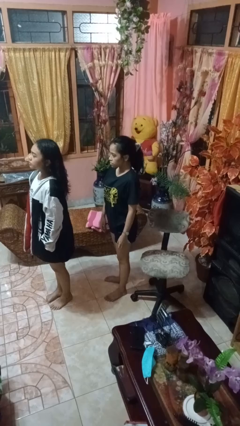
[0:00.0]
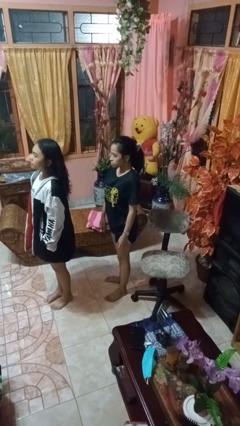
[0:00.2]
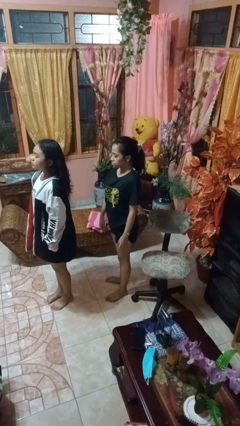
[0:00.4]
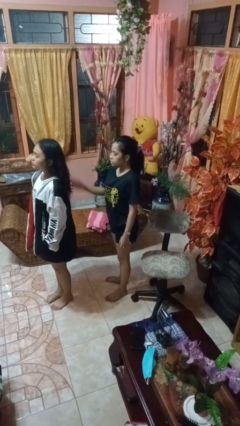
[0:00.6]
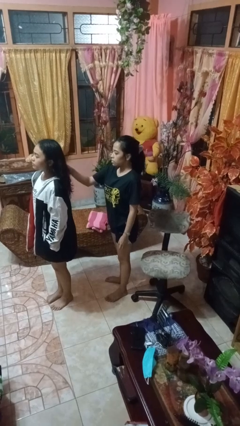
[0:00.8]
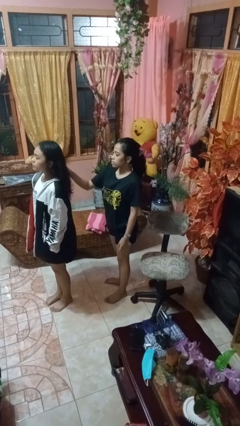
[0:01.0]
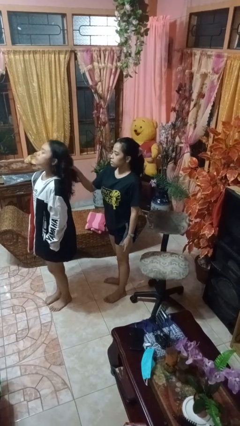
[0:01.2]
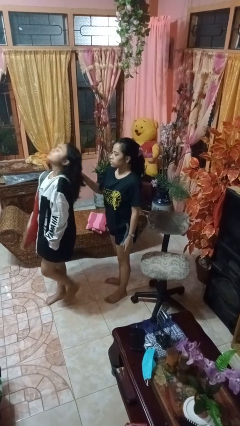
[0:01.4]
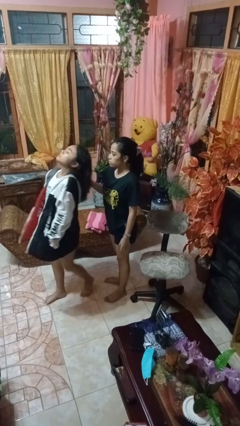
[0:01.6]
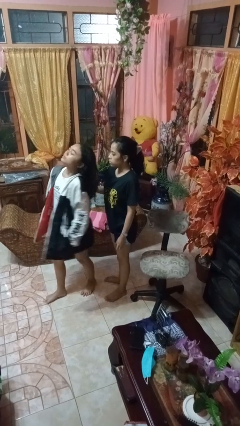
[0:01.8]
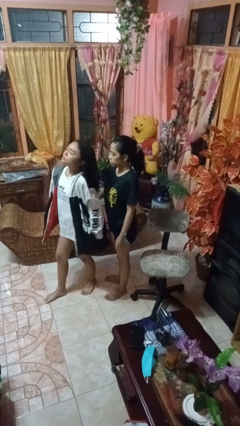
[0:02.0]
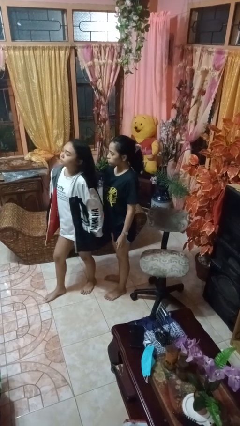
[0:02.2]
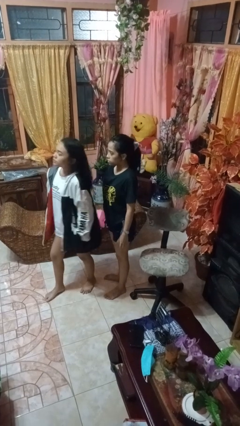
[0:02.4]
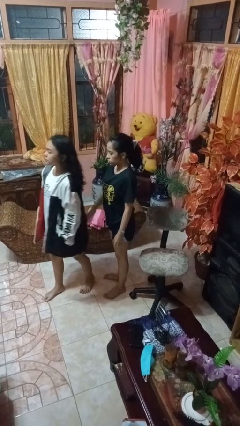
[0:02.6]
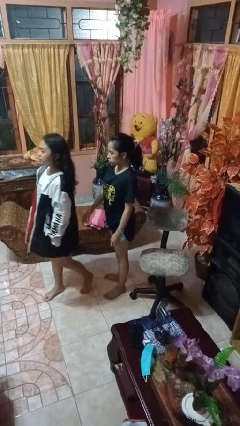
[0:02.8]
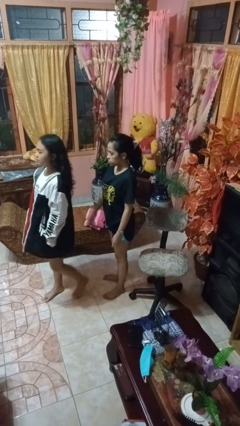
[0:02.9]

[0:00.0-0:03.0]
person grabs person by hair

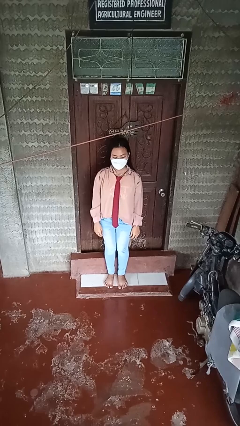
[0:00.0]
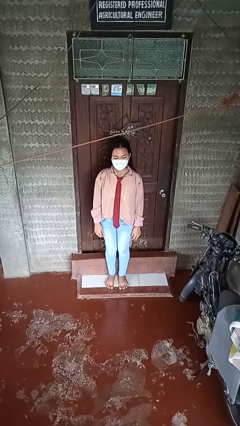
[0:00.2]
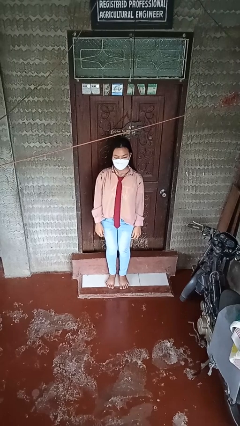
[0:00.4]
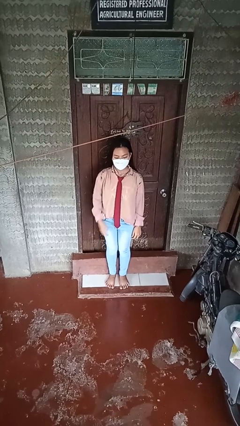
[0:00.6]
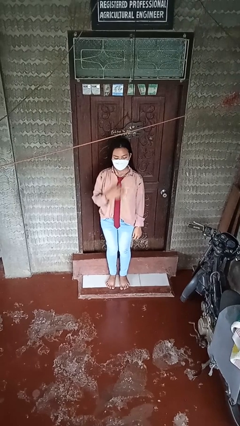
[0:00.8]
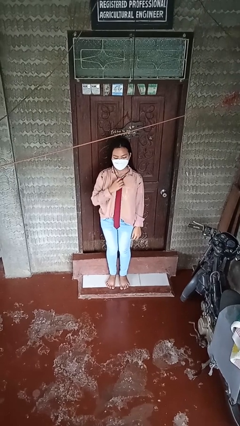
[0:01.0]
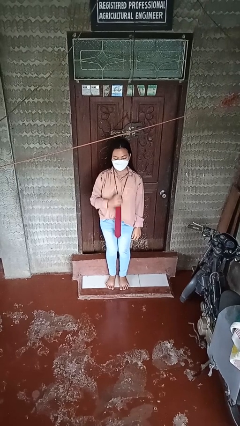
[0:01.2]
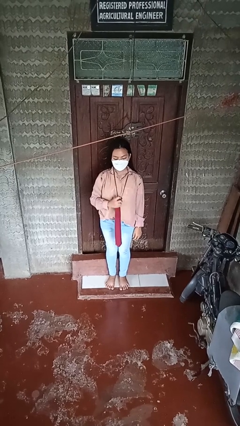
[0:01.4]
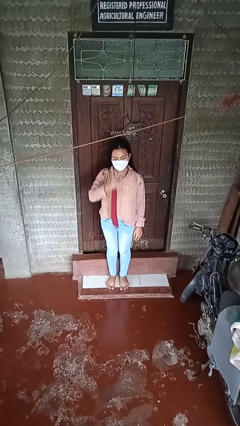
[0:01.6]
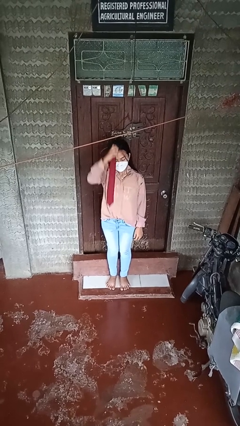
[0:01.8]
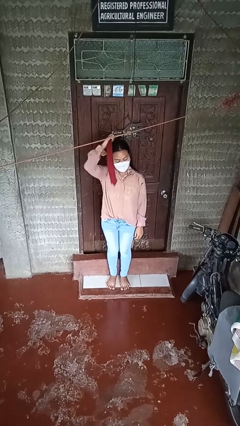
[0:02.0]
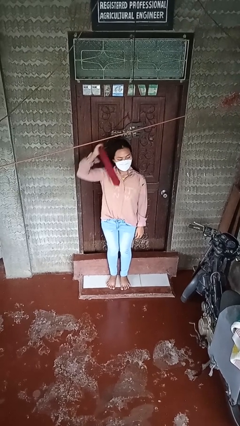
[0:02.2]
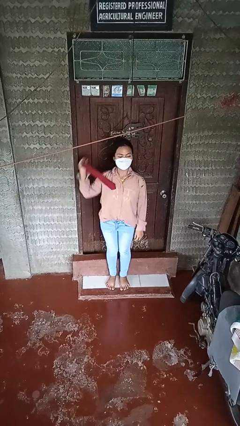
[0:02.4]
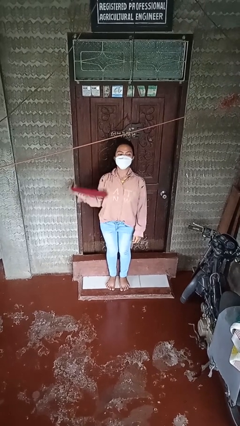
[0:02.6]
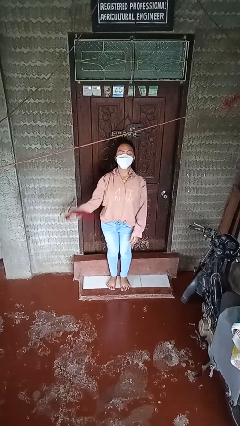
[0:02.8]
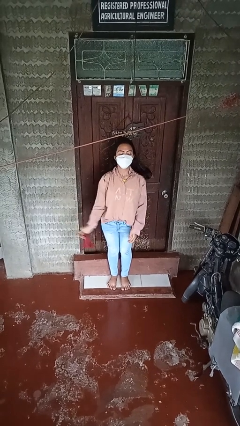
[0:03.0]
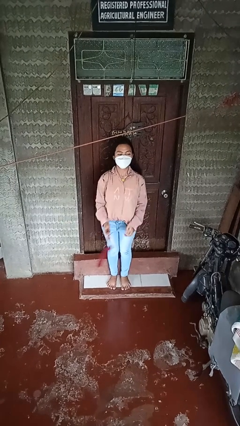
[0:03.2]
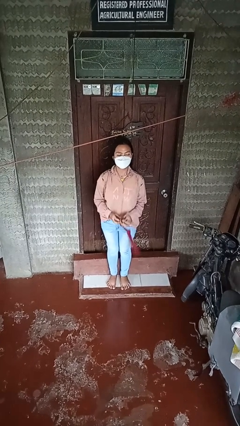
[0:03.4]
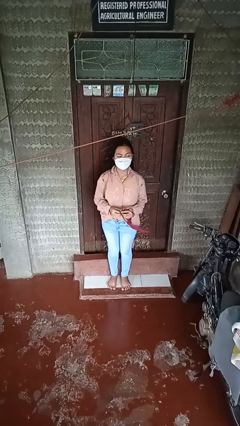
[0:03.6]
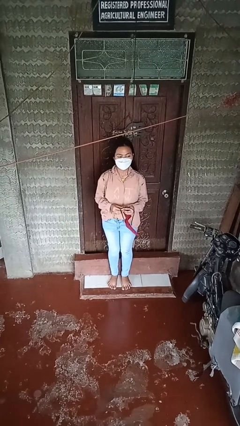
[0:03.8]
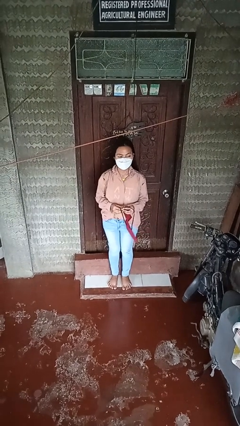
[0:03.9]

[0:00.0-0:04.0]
person takes off necktie

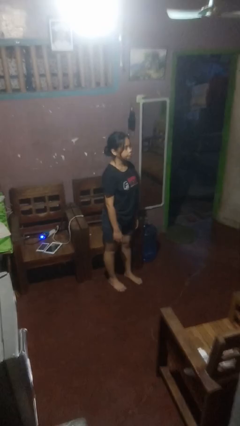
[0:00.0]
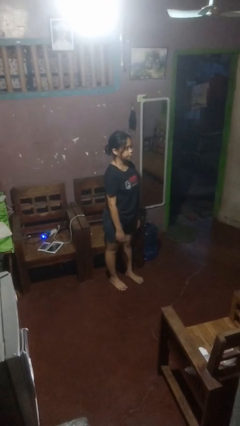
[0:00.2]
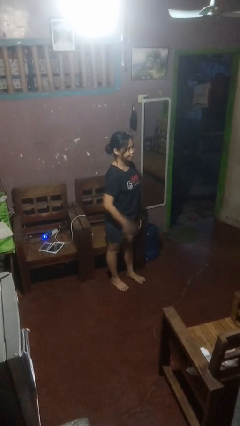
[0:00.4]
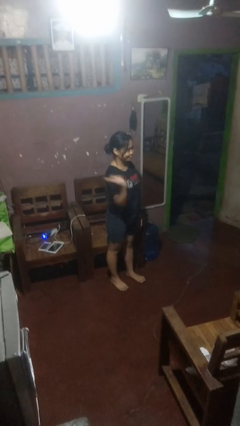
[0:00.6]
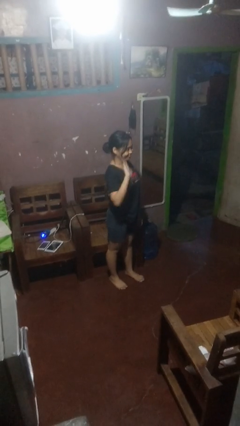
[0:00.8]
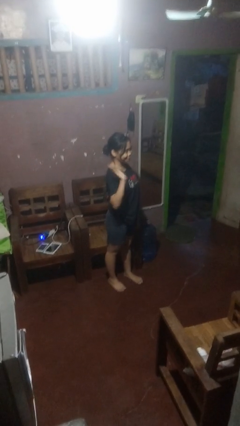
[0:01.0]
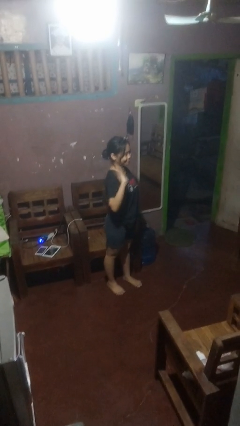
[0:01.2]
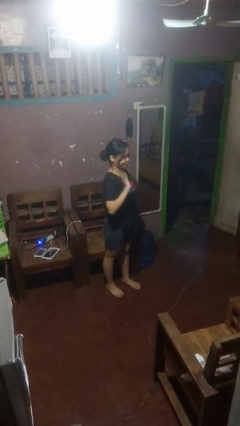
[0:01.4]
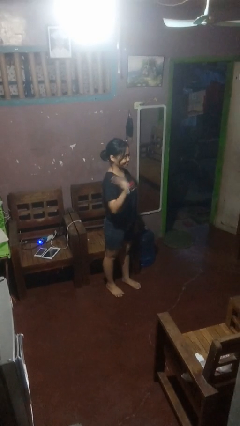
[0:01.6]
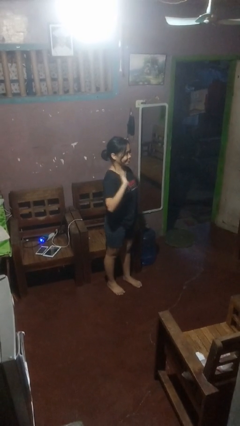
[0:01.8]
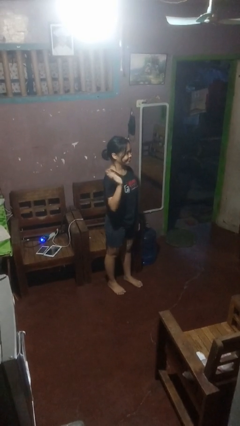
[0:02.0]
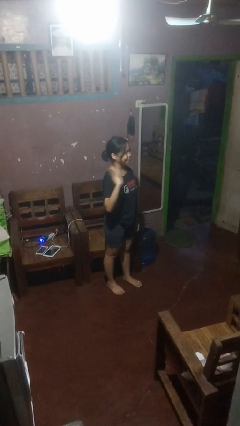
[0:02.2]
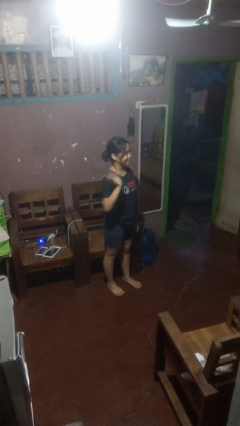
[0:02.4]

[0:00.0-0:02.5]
person waves at person

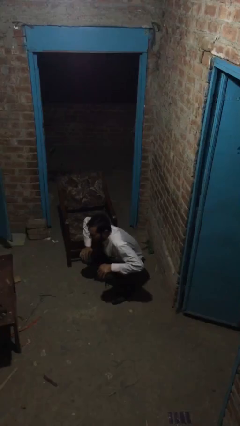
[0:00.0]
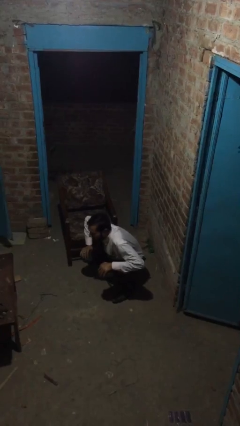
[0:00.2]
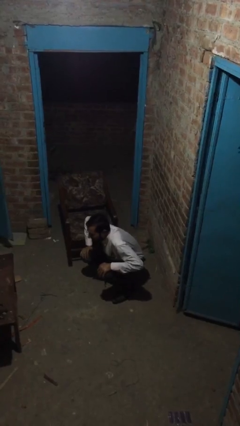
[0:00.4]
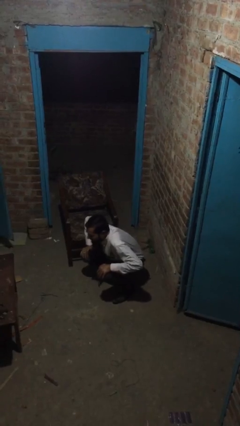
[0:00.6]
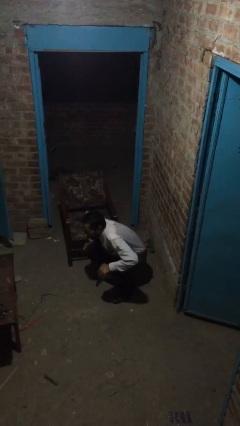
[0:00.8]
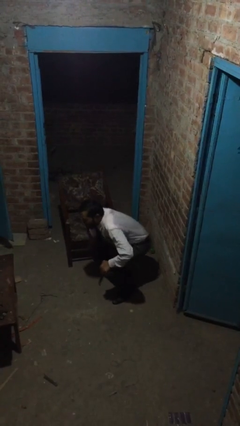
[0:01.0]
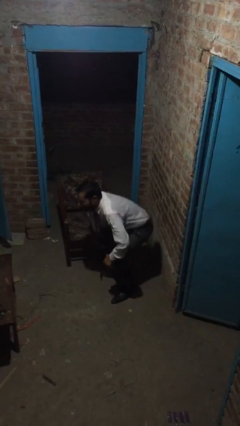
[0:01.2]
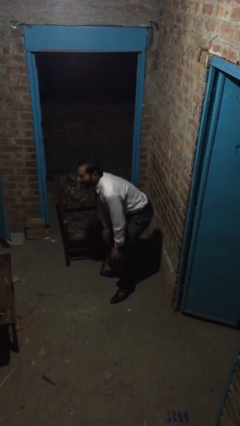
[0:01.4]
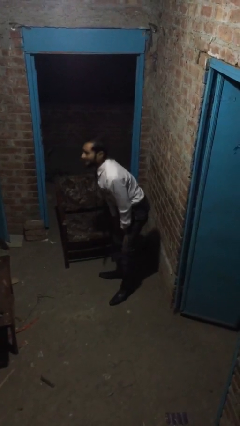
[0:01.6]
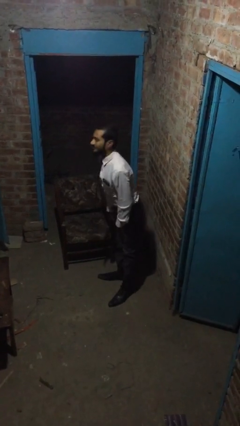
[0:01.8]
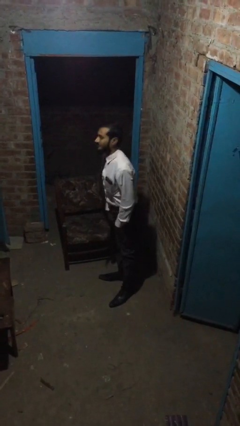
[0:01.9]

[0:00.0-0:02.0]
person stands up

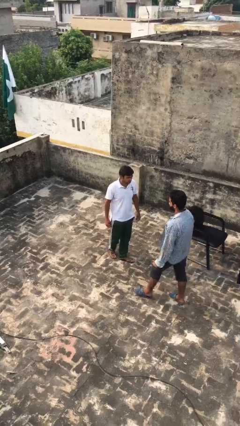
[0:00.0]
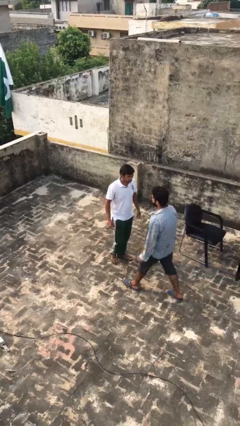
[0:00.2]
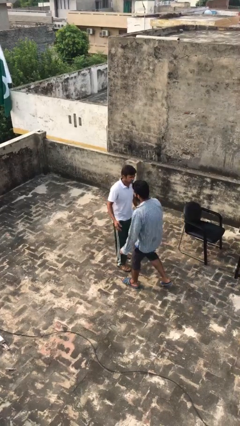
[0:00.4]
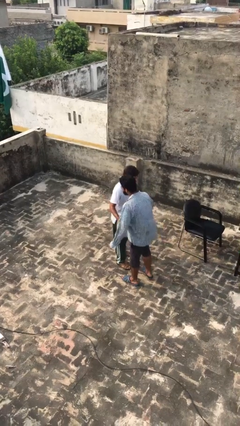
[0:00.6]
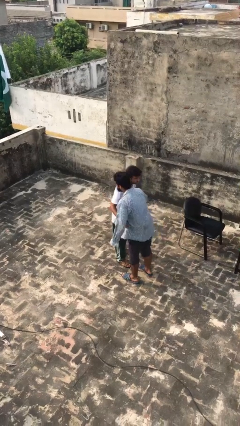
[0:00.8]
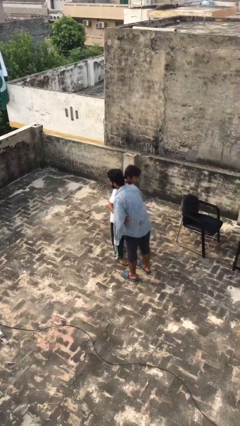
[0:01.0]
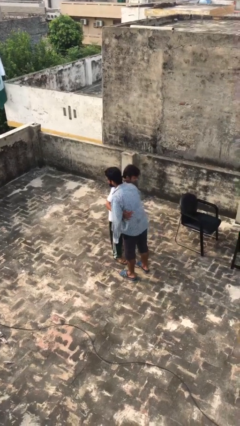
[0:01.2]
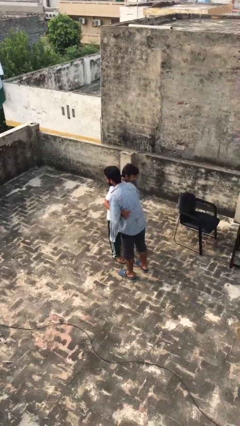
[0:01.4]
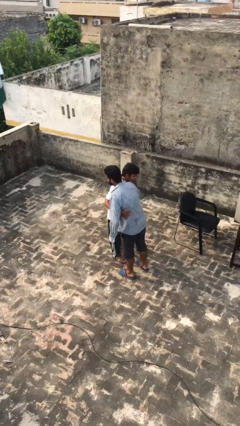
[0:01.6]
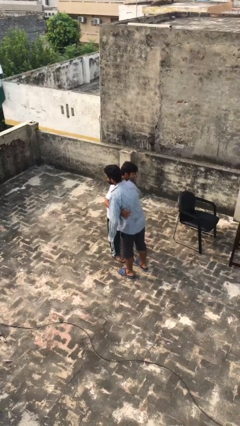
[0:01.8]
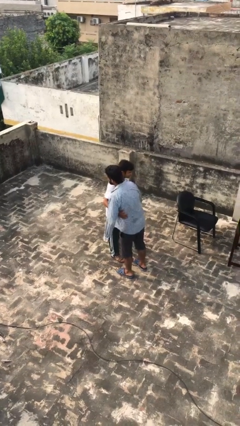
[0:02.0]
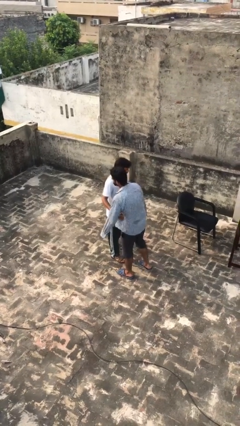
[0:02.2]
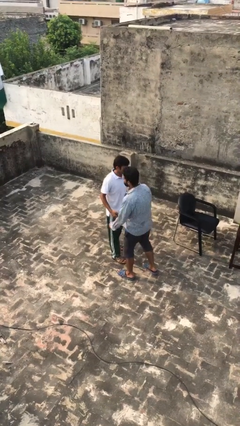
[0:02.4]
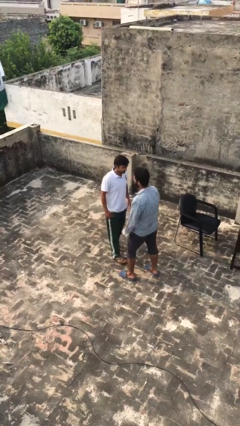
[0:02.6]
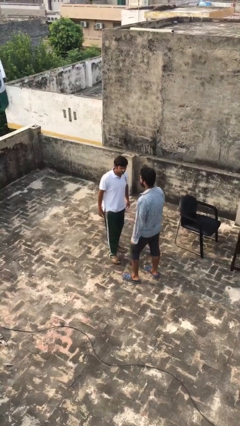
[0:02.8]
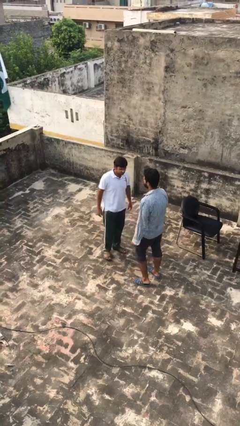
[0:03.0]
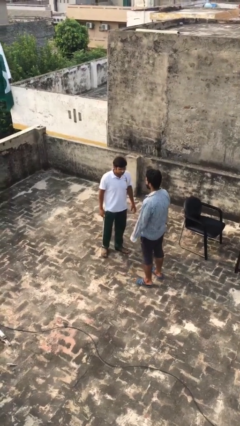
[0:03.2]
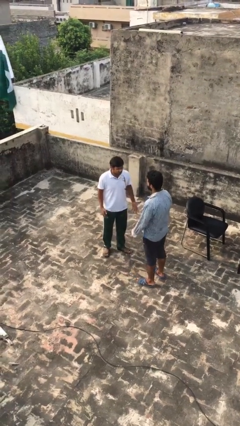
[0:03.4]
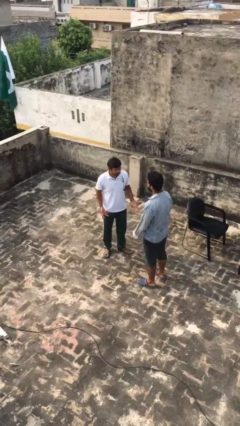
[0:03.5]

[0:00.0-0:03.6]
person embraces person

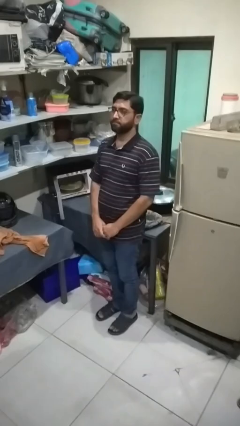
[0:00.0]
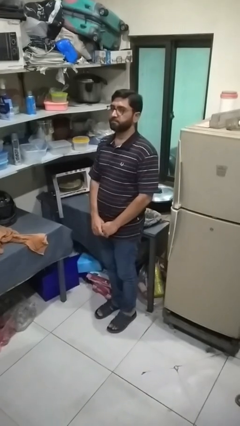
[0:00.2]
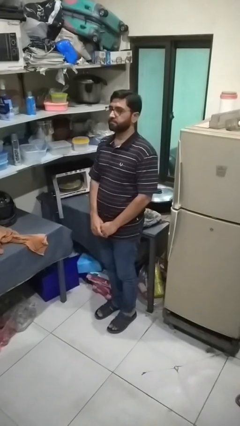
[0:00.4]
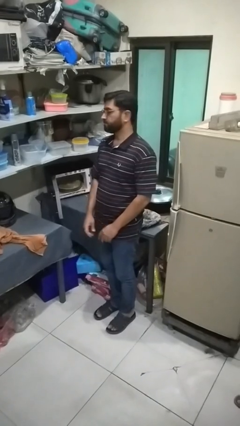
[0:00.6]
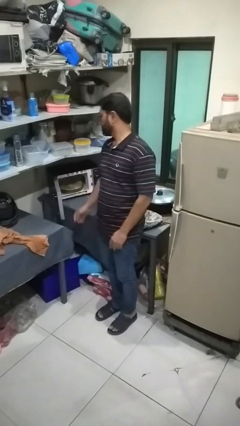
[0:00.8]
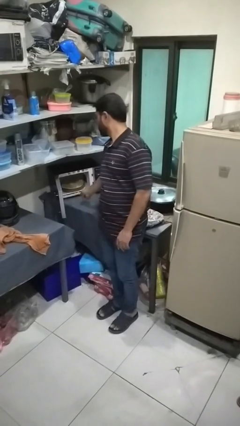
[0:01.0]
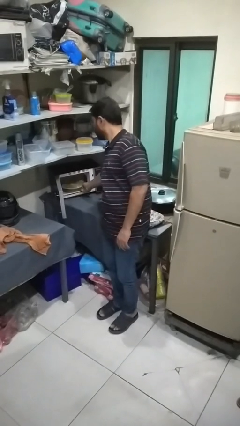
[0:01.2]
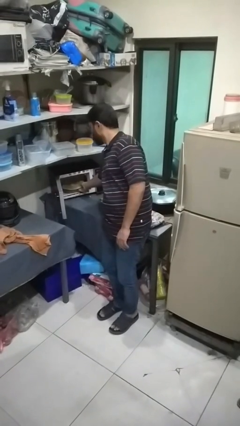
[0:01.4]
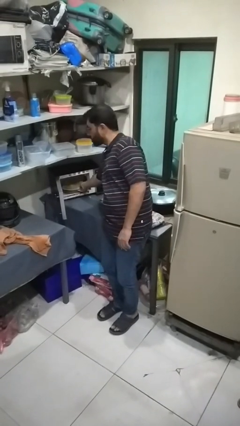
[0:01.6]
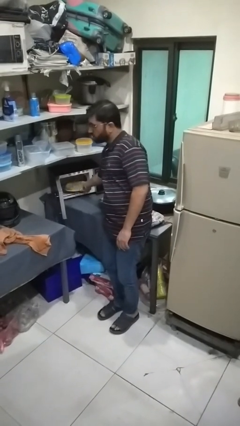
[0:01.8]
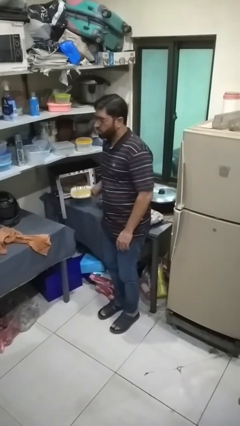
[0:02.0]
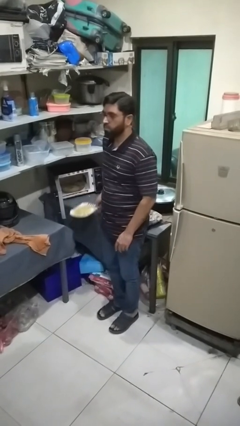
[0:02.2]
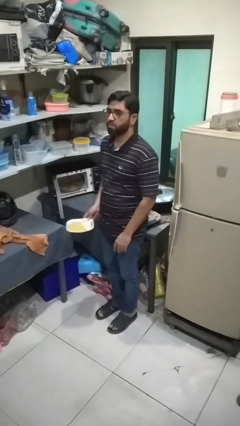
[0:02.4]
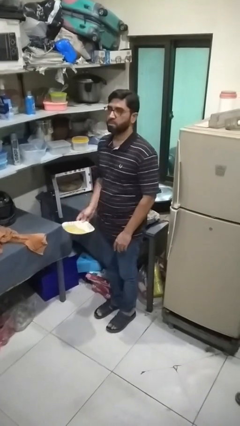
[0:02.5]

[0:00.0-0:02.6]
person takes object from microwave
